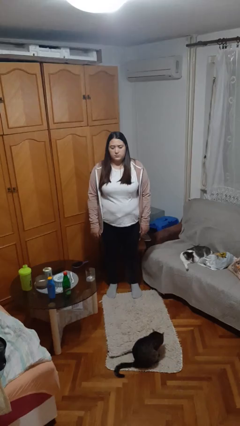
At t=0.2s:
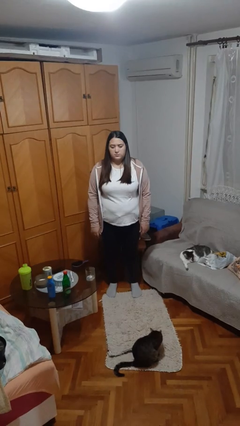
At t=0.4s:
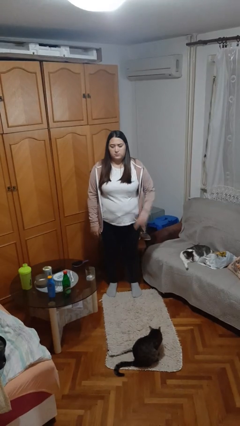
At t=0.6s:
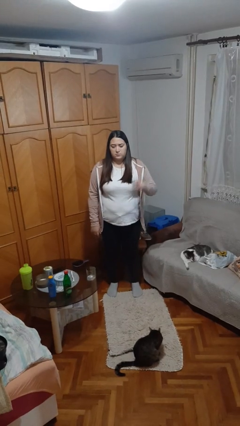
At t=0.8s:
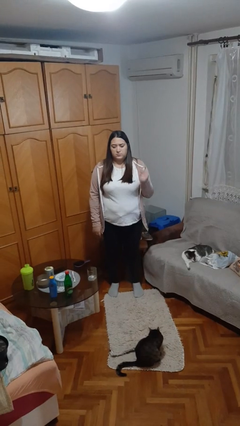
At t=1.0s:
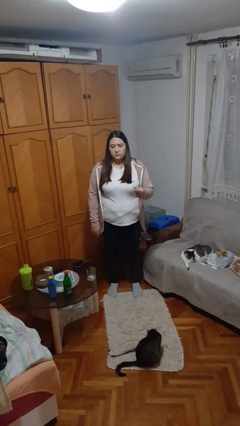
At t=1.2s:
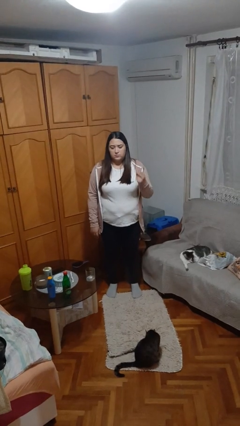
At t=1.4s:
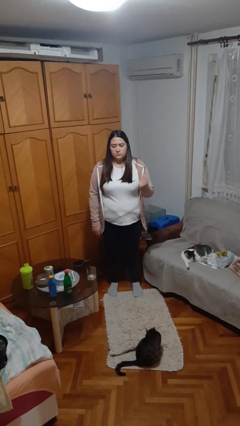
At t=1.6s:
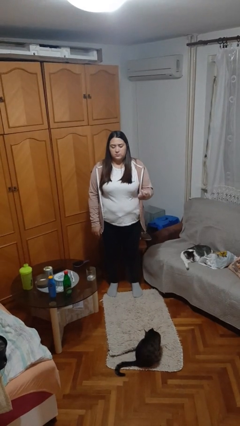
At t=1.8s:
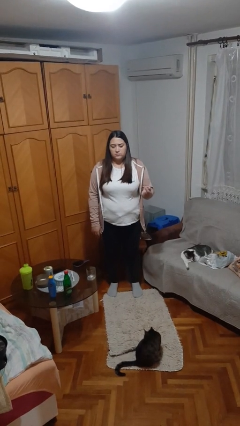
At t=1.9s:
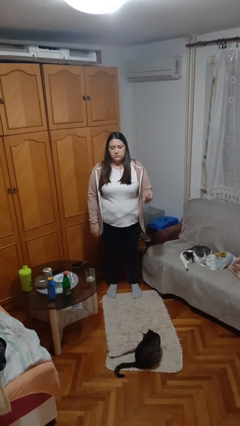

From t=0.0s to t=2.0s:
person snaps fingers

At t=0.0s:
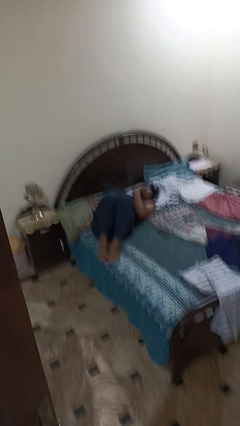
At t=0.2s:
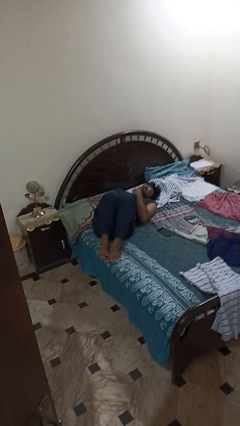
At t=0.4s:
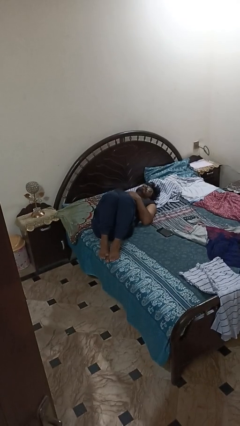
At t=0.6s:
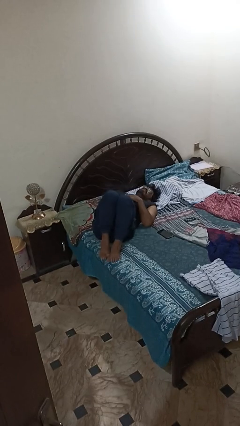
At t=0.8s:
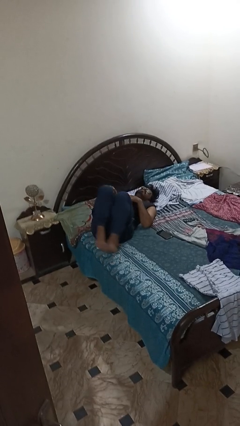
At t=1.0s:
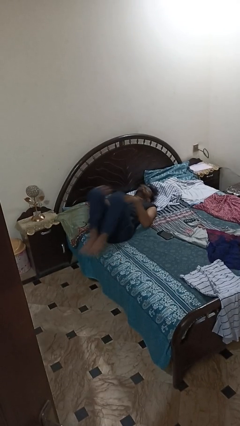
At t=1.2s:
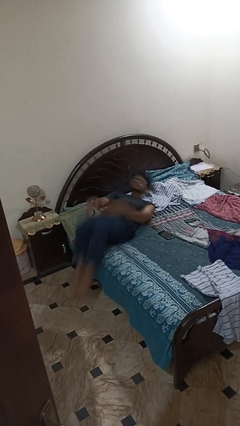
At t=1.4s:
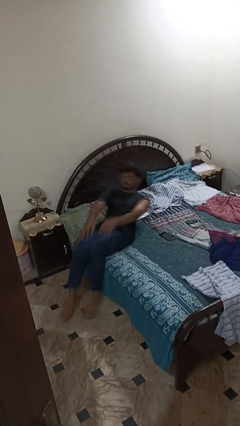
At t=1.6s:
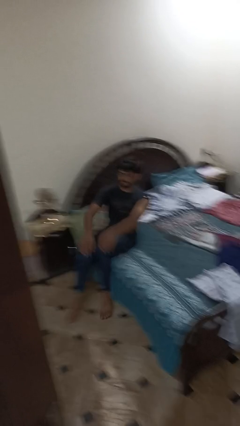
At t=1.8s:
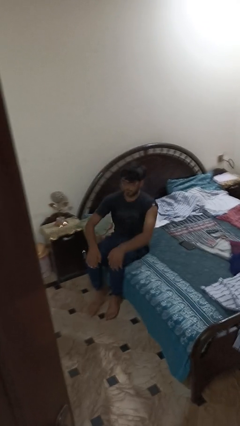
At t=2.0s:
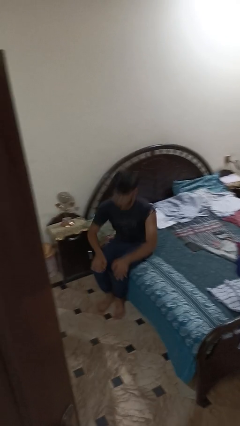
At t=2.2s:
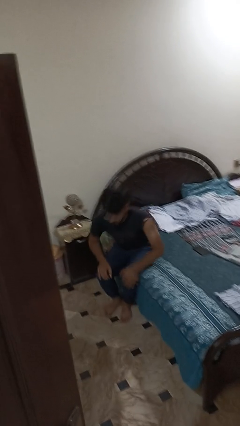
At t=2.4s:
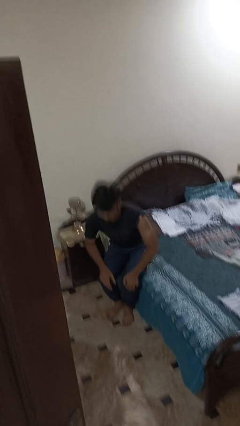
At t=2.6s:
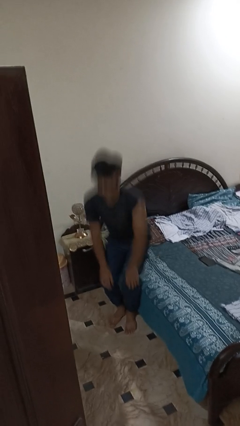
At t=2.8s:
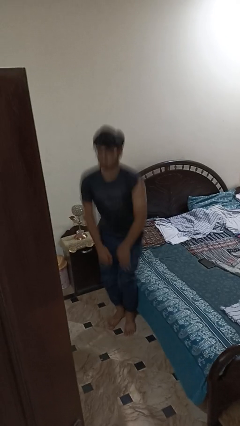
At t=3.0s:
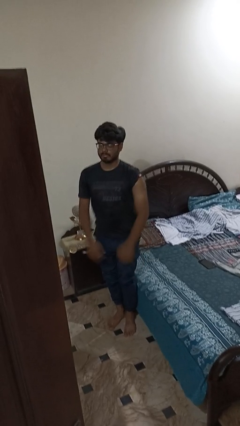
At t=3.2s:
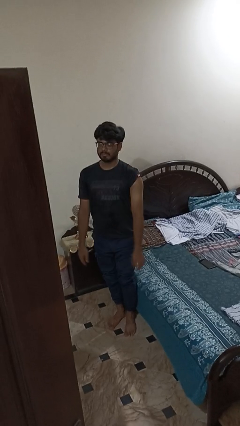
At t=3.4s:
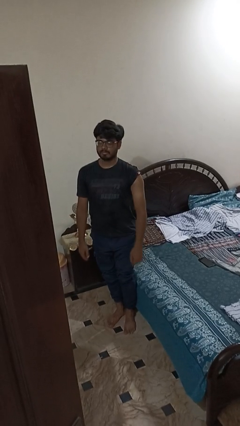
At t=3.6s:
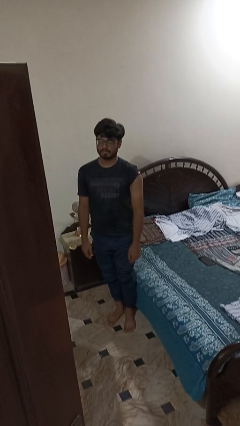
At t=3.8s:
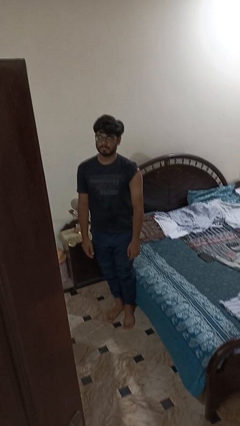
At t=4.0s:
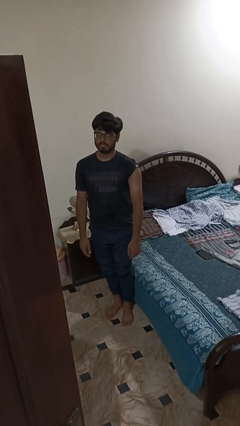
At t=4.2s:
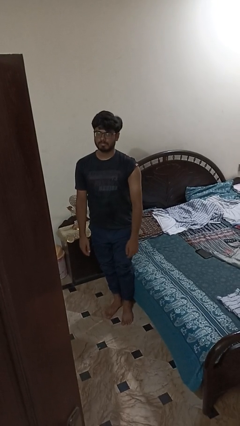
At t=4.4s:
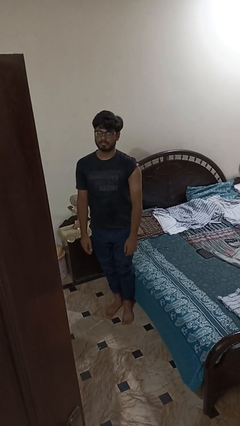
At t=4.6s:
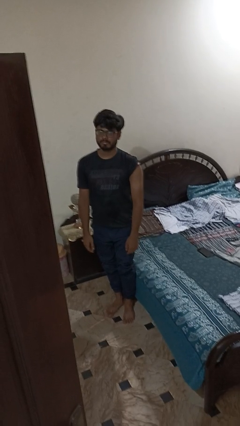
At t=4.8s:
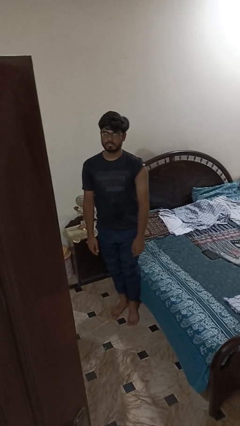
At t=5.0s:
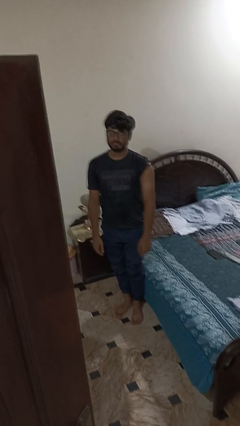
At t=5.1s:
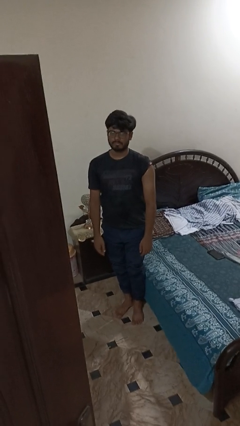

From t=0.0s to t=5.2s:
person stands up

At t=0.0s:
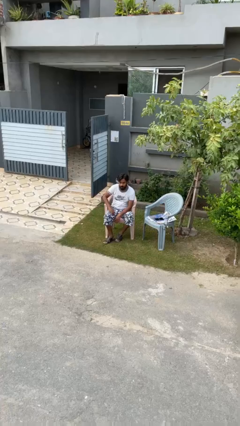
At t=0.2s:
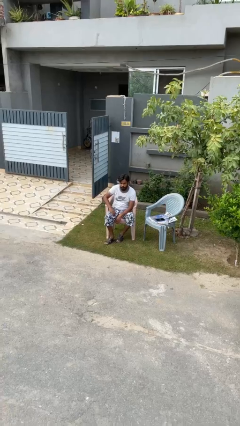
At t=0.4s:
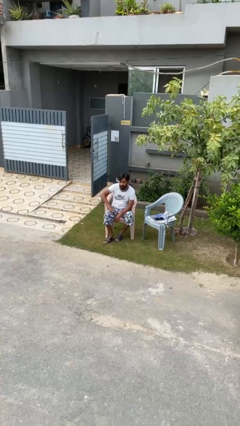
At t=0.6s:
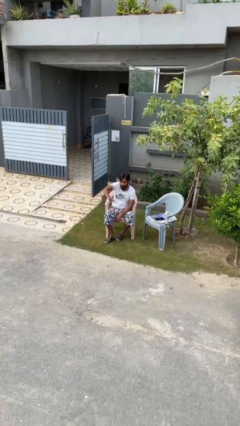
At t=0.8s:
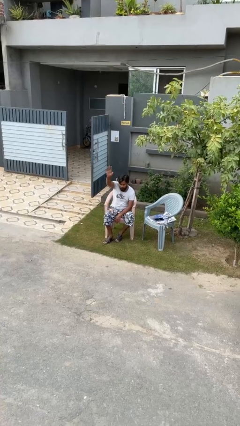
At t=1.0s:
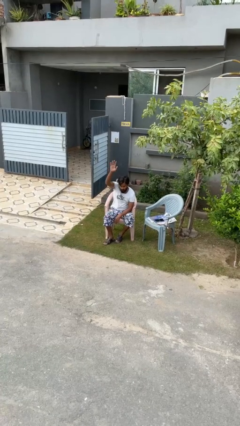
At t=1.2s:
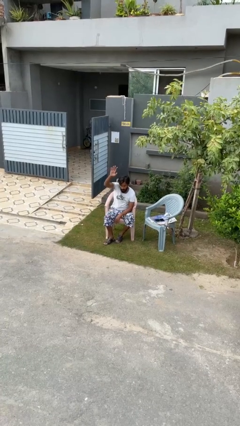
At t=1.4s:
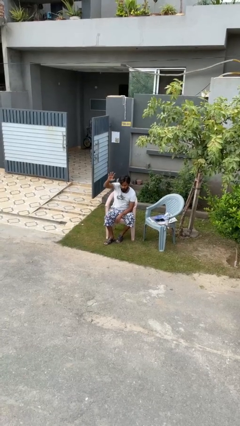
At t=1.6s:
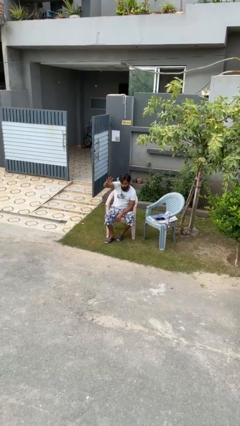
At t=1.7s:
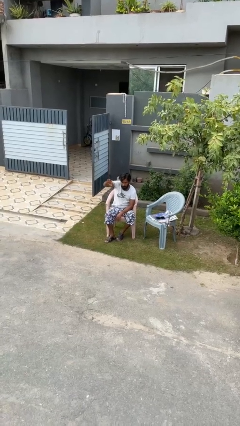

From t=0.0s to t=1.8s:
person gestures swipe up

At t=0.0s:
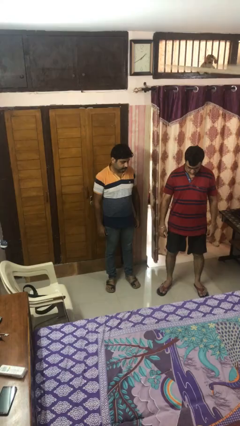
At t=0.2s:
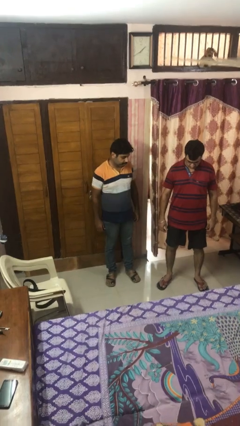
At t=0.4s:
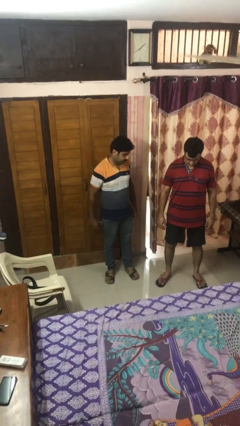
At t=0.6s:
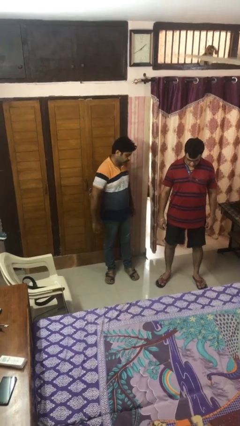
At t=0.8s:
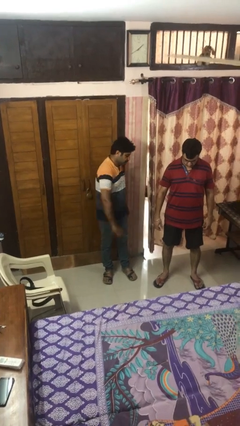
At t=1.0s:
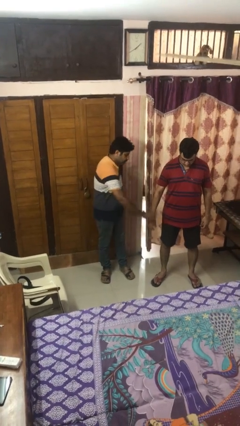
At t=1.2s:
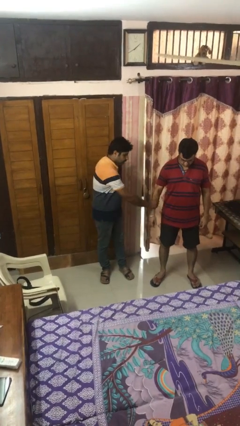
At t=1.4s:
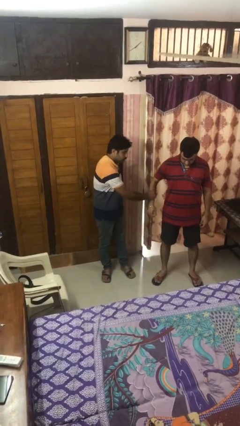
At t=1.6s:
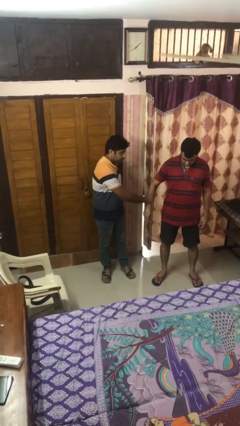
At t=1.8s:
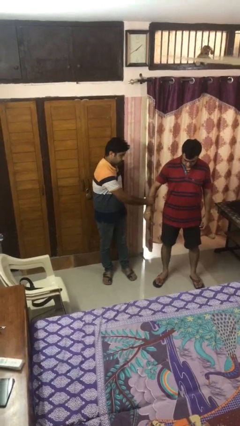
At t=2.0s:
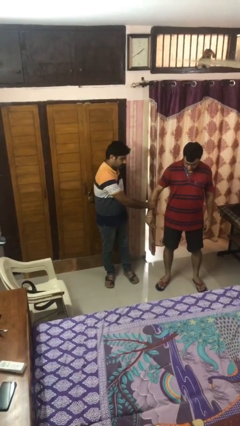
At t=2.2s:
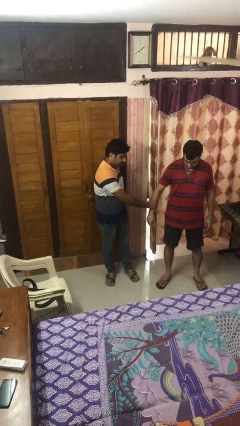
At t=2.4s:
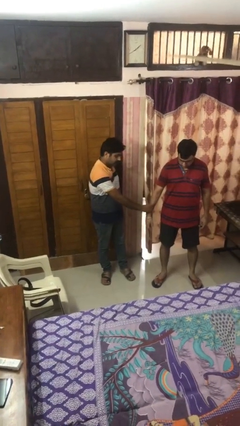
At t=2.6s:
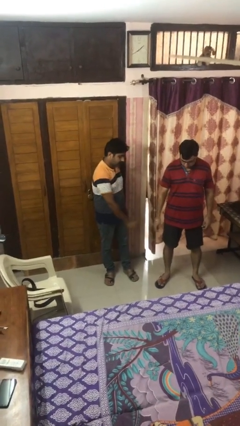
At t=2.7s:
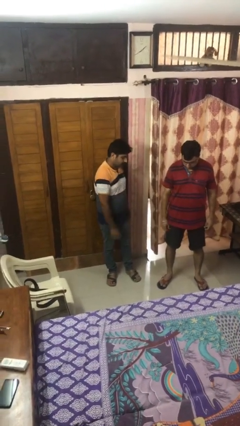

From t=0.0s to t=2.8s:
person grabs person by forearm

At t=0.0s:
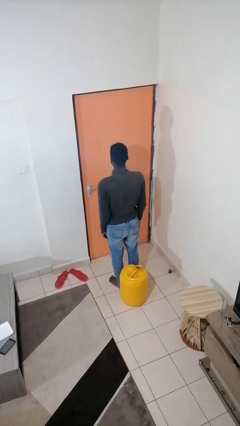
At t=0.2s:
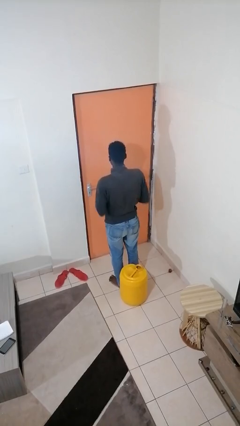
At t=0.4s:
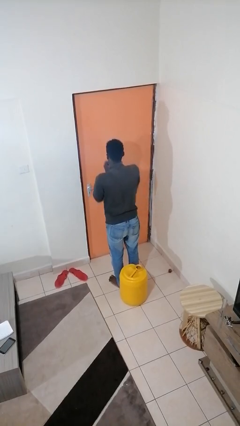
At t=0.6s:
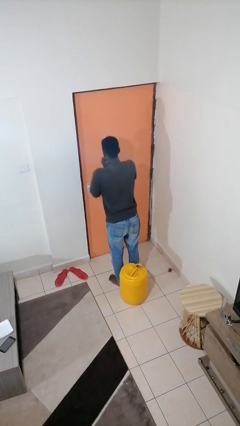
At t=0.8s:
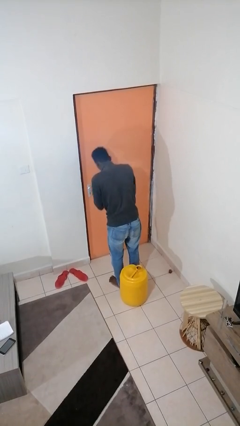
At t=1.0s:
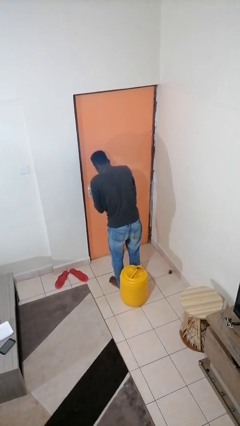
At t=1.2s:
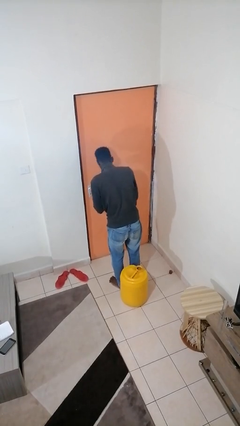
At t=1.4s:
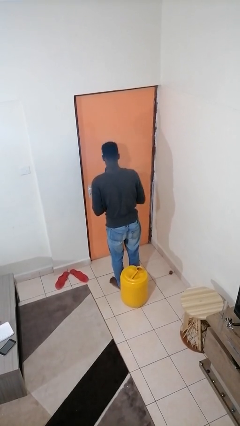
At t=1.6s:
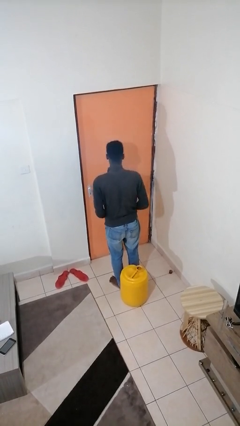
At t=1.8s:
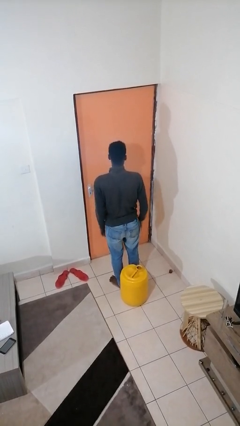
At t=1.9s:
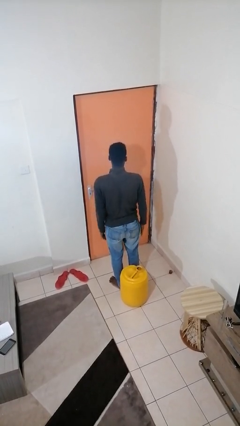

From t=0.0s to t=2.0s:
person sneezes into hand

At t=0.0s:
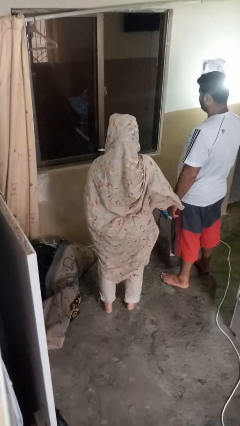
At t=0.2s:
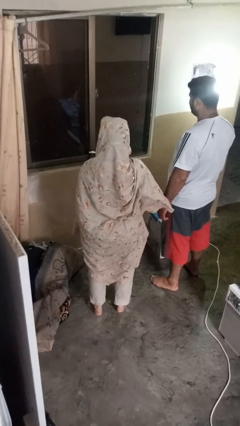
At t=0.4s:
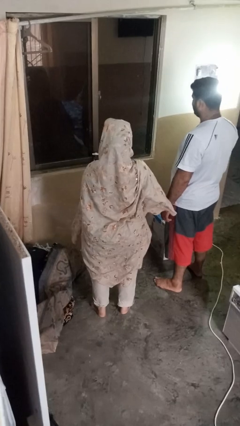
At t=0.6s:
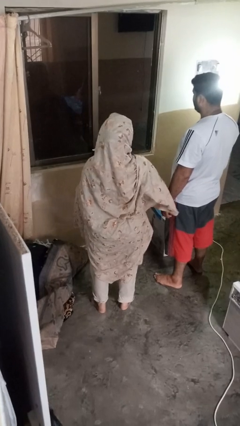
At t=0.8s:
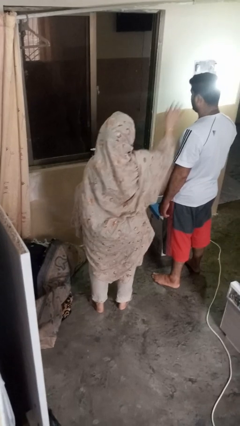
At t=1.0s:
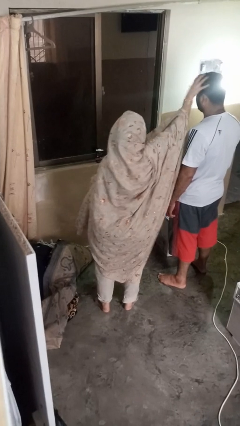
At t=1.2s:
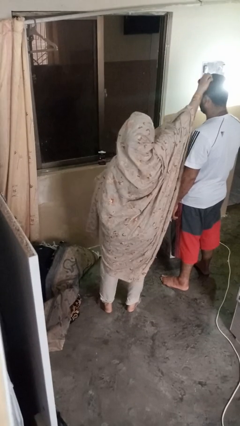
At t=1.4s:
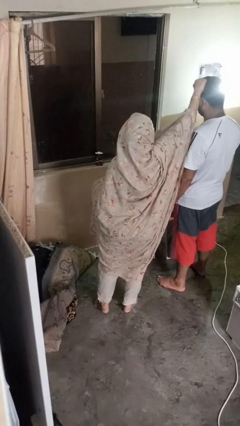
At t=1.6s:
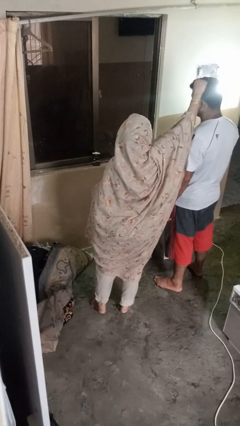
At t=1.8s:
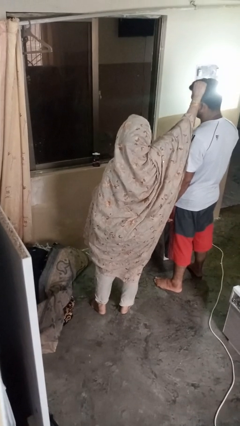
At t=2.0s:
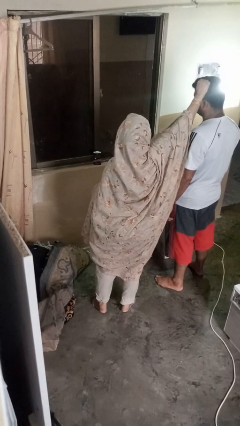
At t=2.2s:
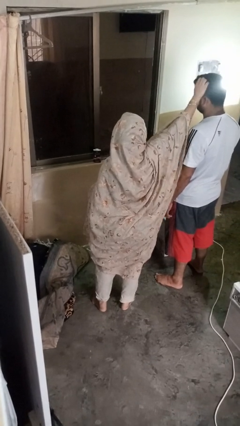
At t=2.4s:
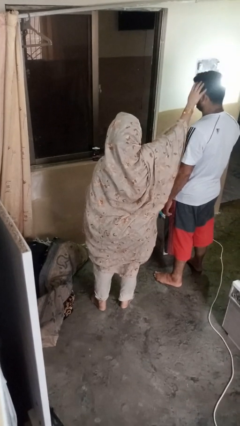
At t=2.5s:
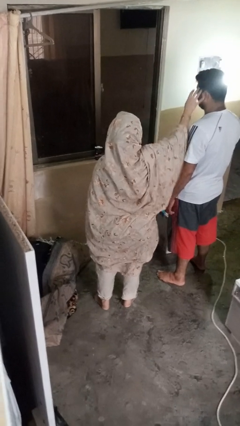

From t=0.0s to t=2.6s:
person grabs person by hair

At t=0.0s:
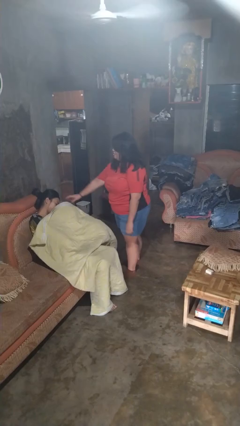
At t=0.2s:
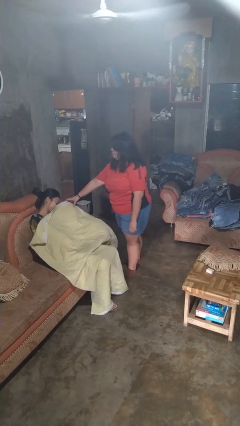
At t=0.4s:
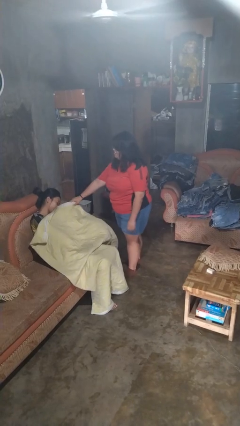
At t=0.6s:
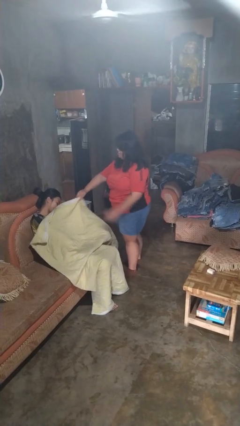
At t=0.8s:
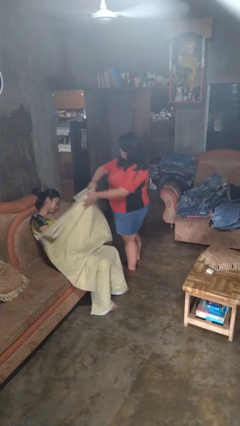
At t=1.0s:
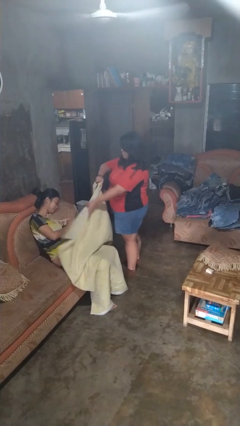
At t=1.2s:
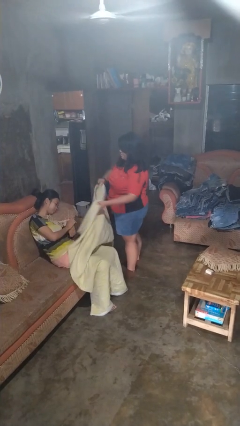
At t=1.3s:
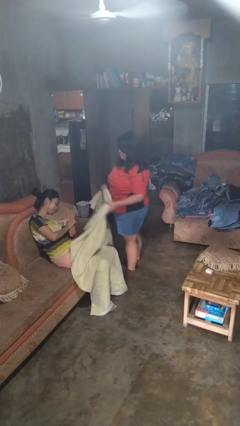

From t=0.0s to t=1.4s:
person uncovers friend with blanket
